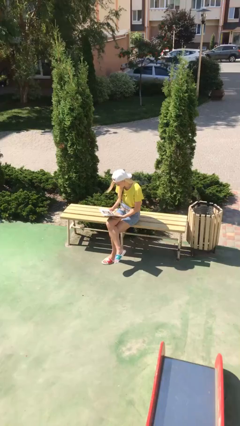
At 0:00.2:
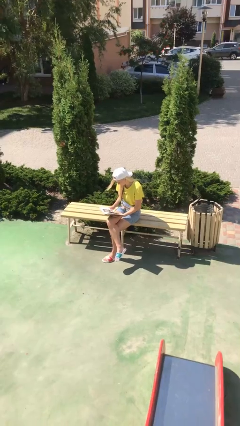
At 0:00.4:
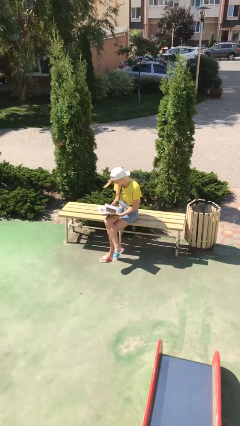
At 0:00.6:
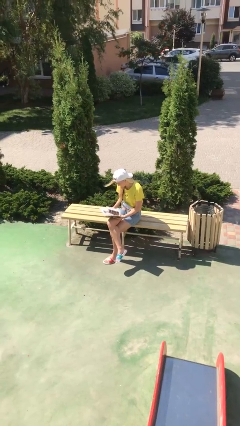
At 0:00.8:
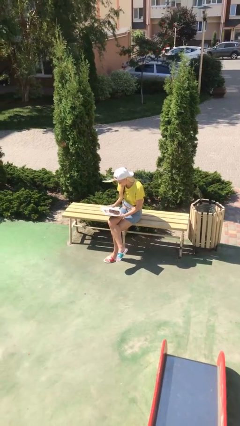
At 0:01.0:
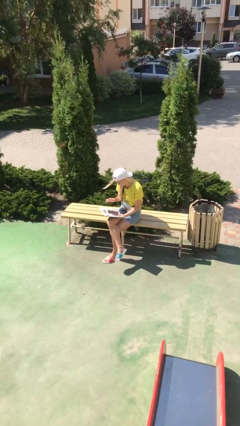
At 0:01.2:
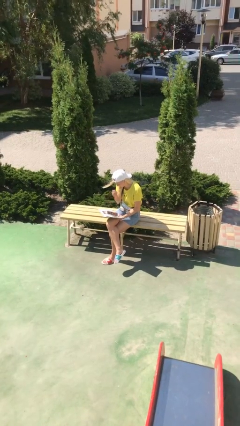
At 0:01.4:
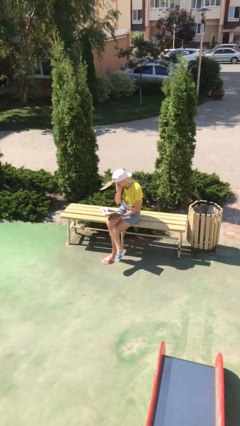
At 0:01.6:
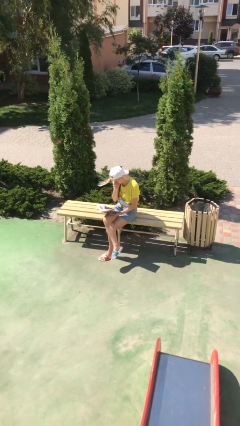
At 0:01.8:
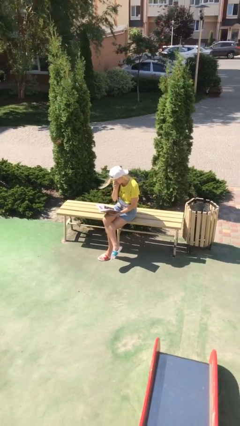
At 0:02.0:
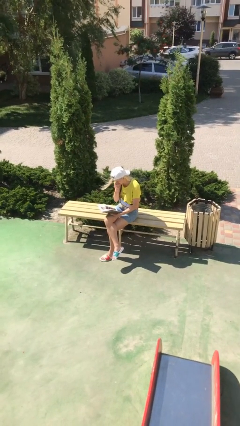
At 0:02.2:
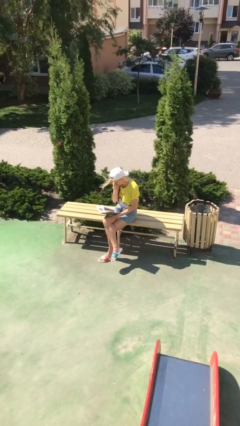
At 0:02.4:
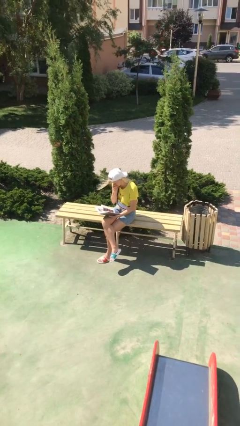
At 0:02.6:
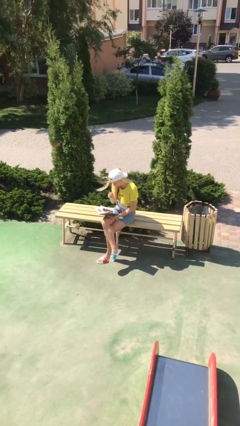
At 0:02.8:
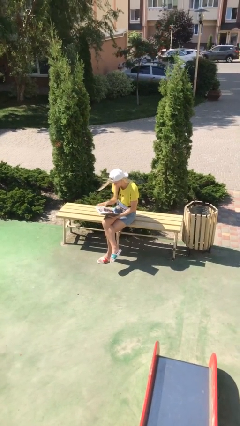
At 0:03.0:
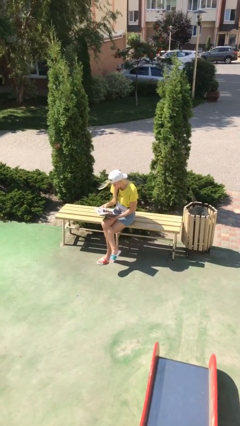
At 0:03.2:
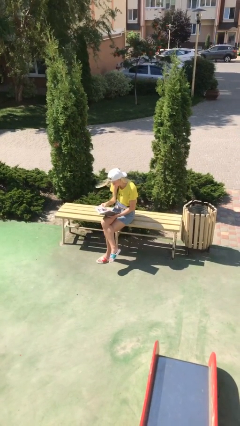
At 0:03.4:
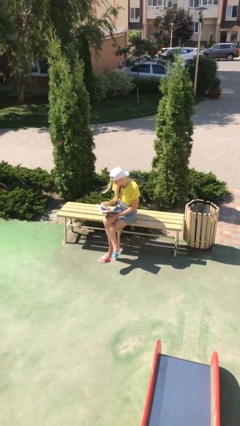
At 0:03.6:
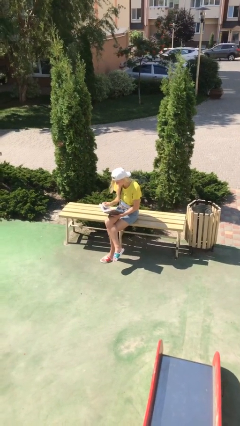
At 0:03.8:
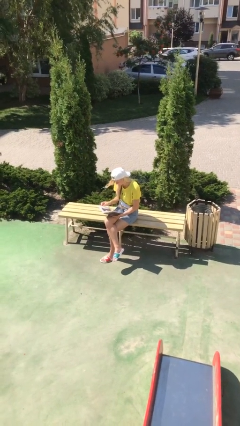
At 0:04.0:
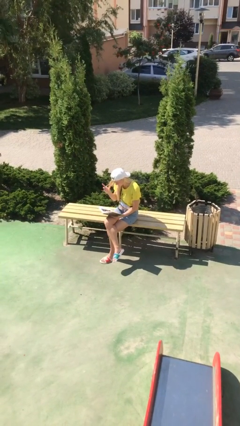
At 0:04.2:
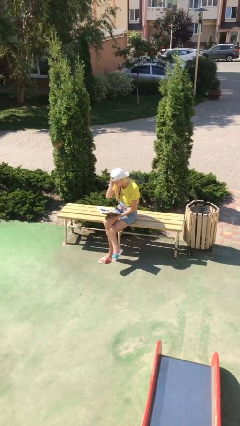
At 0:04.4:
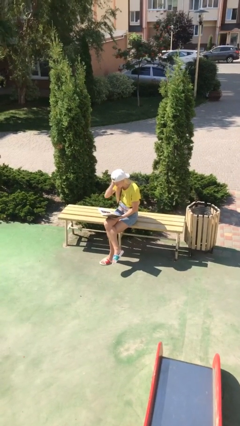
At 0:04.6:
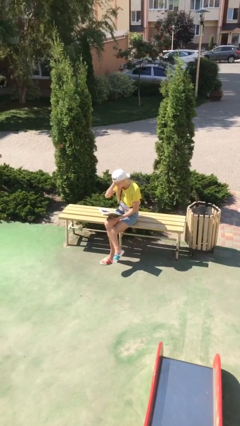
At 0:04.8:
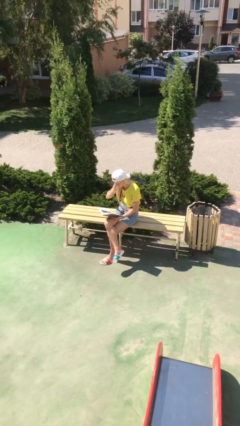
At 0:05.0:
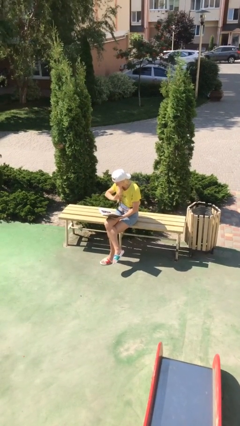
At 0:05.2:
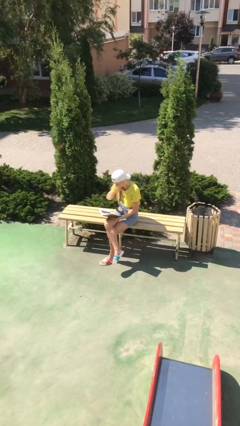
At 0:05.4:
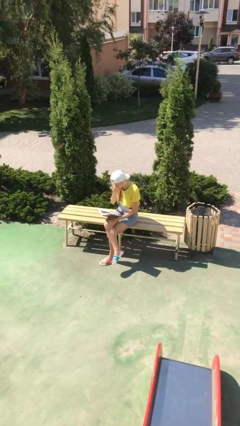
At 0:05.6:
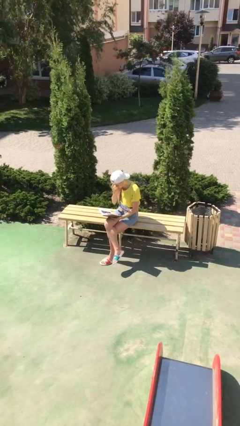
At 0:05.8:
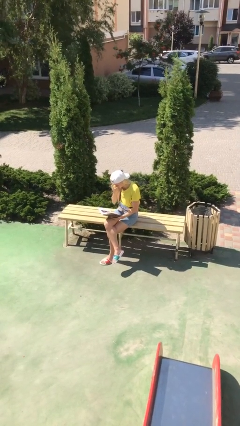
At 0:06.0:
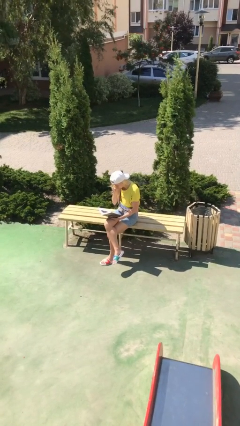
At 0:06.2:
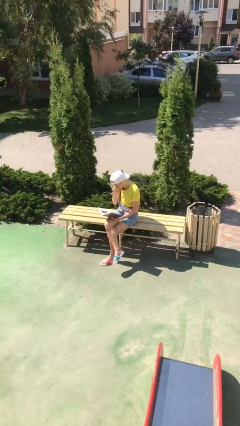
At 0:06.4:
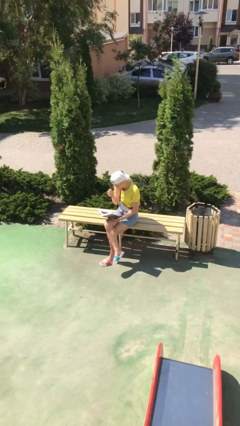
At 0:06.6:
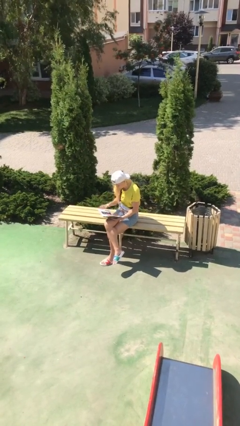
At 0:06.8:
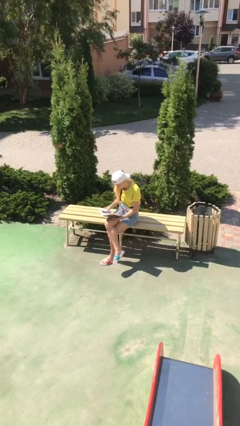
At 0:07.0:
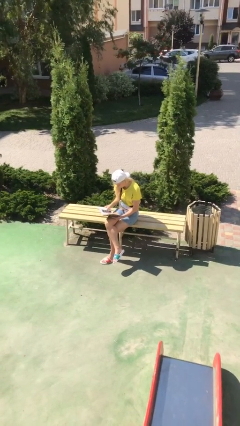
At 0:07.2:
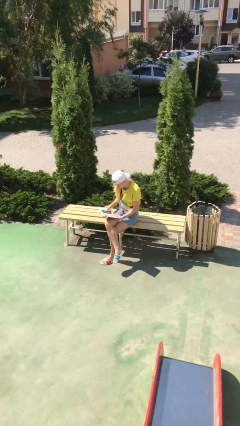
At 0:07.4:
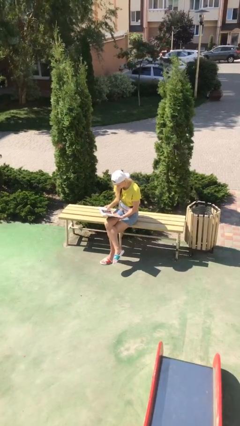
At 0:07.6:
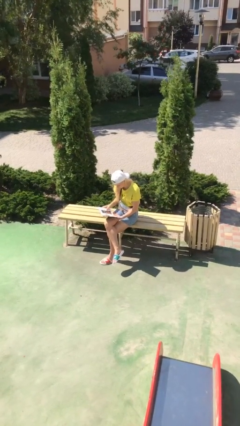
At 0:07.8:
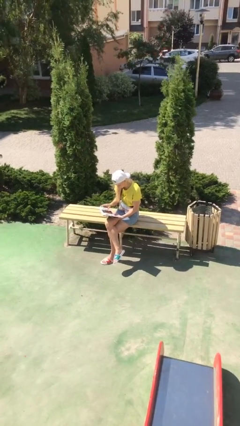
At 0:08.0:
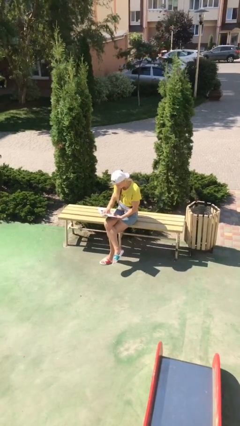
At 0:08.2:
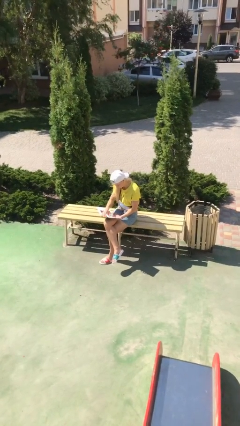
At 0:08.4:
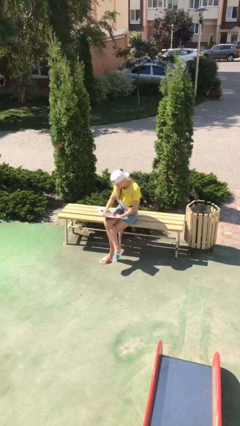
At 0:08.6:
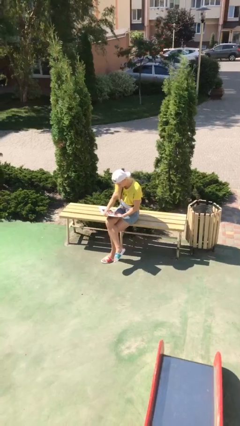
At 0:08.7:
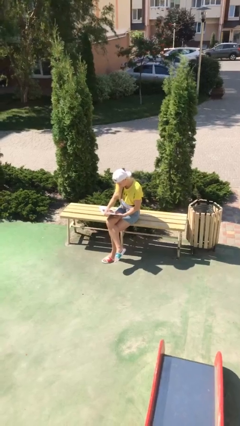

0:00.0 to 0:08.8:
person reads document

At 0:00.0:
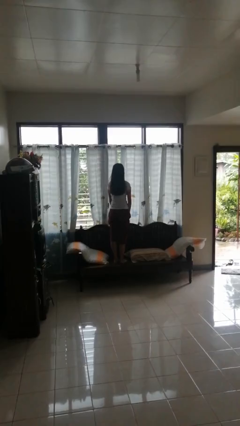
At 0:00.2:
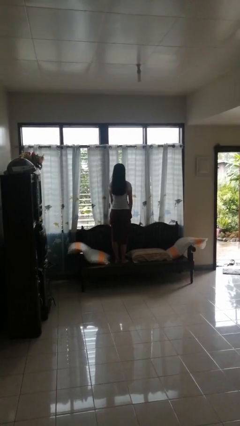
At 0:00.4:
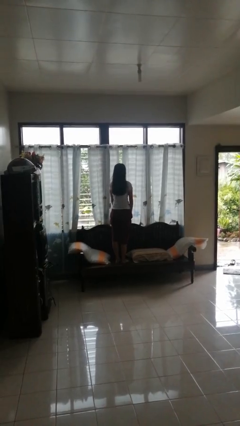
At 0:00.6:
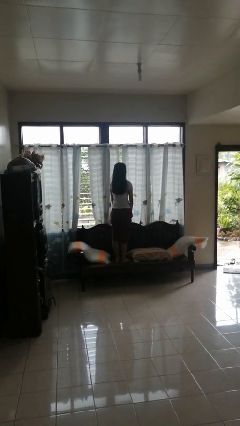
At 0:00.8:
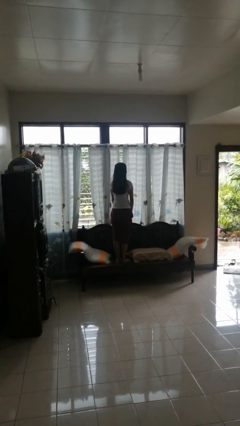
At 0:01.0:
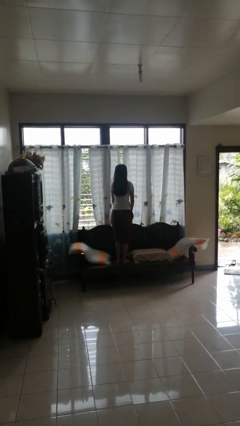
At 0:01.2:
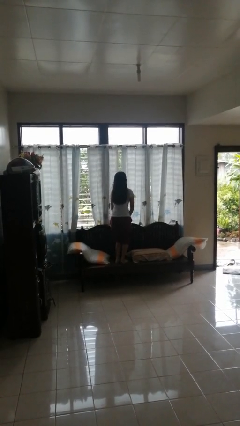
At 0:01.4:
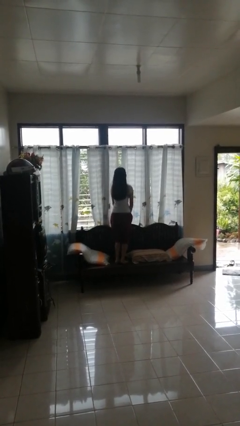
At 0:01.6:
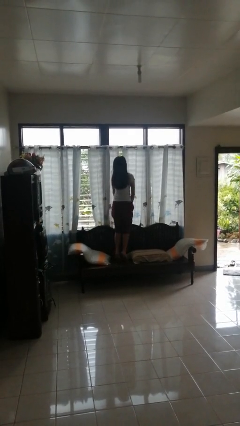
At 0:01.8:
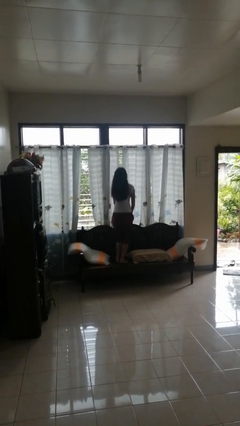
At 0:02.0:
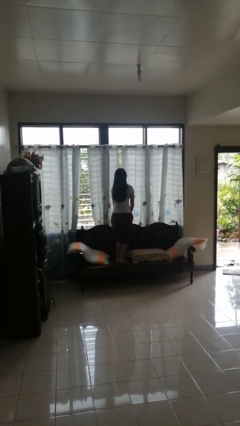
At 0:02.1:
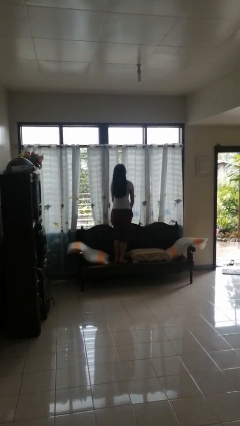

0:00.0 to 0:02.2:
person jumps on couch

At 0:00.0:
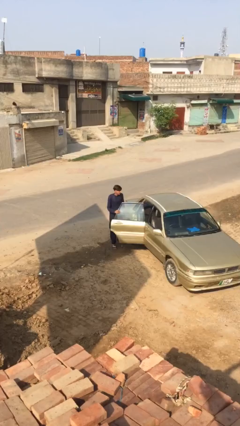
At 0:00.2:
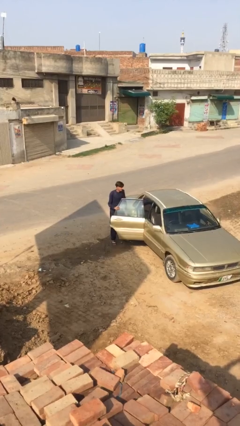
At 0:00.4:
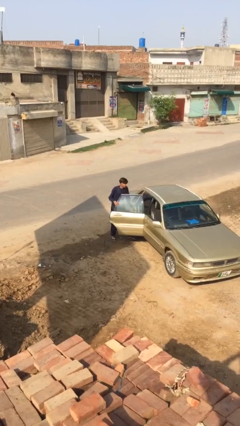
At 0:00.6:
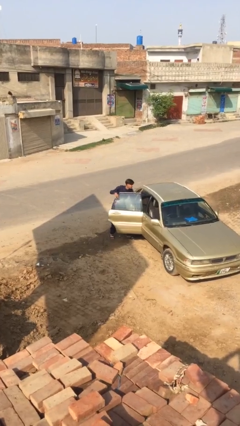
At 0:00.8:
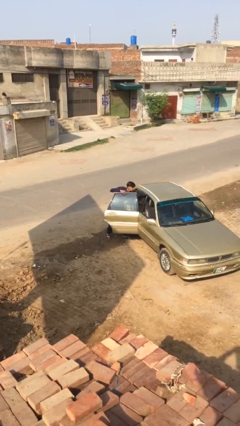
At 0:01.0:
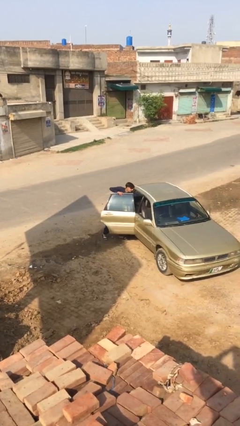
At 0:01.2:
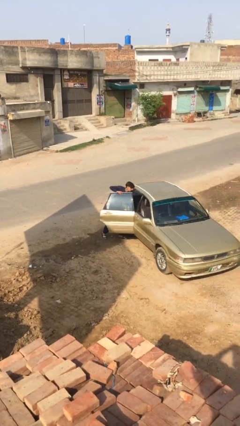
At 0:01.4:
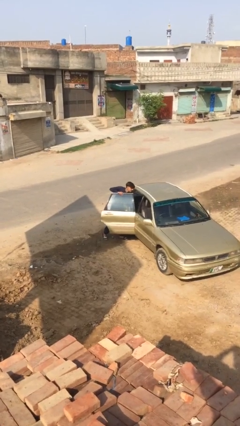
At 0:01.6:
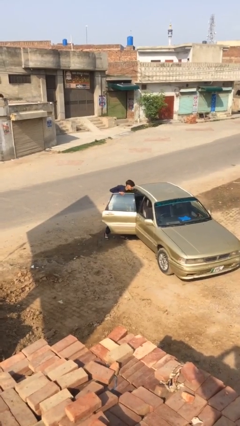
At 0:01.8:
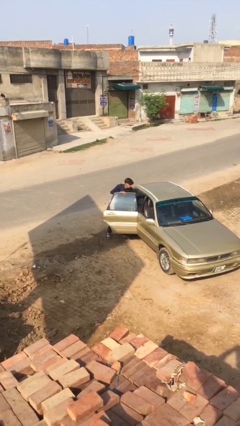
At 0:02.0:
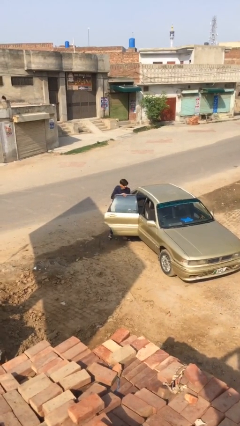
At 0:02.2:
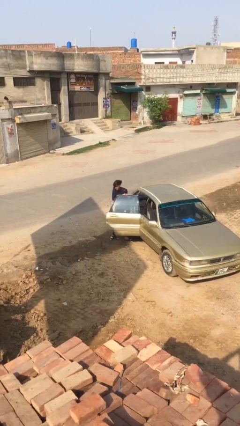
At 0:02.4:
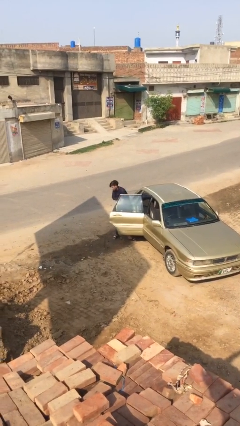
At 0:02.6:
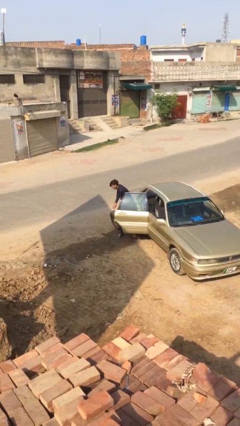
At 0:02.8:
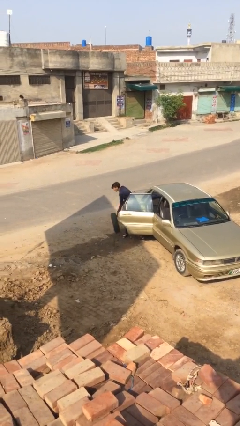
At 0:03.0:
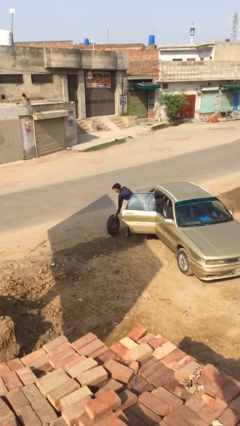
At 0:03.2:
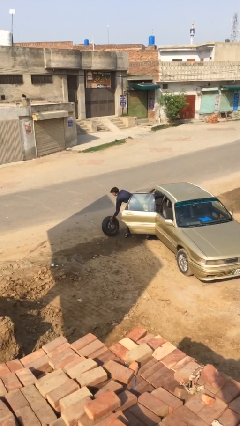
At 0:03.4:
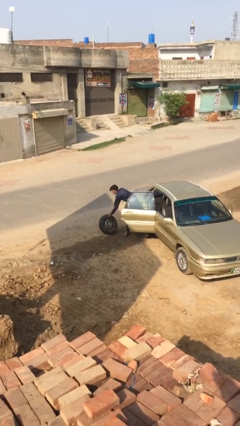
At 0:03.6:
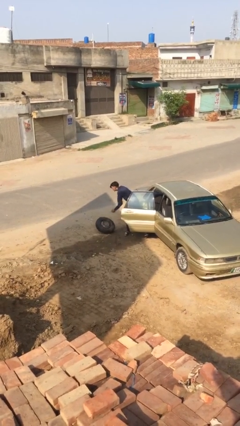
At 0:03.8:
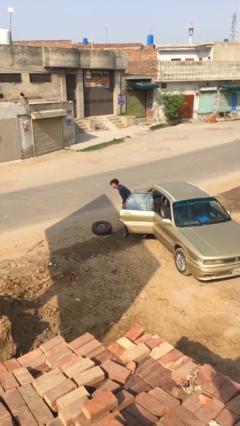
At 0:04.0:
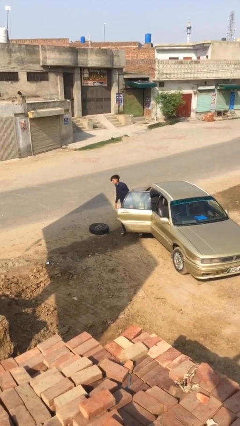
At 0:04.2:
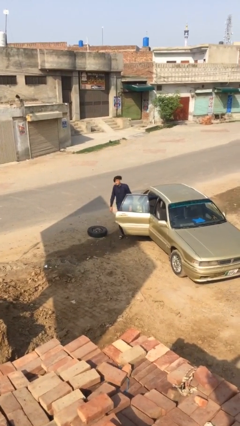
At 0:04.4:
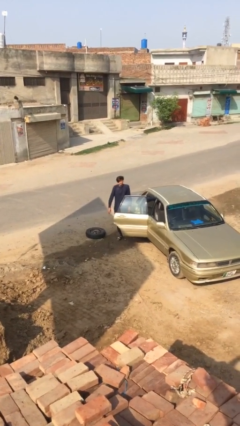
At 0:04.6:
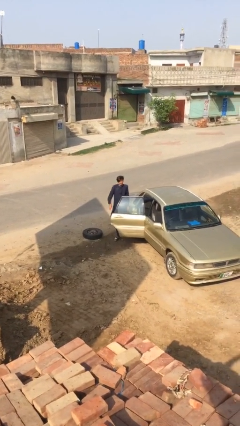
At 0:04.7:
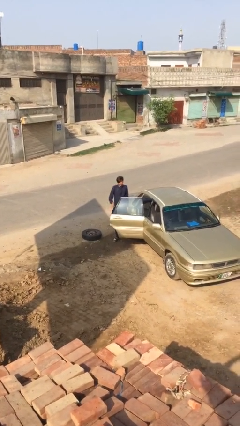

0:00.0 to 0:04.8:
person unloads car

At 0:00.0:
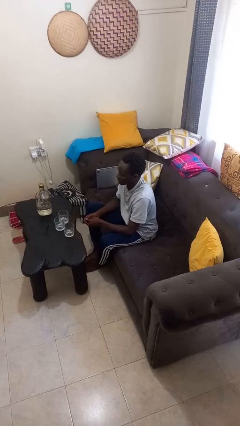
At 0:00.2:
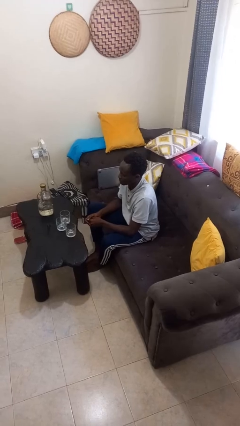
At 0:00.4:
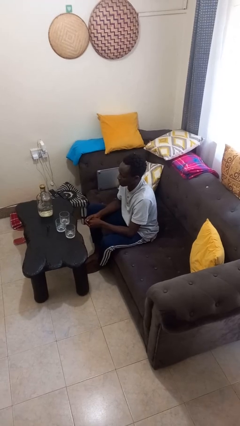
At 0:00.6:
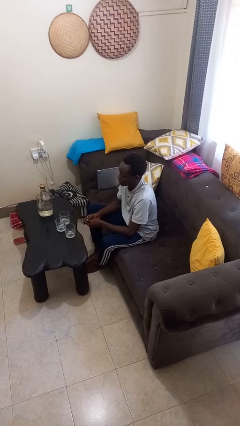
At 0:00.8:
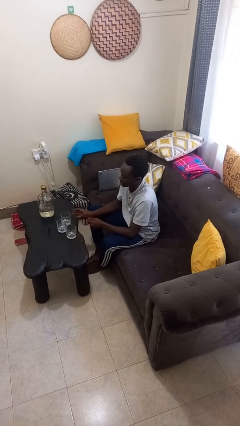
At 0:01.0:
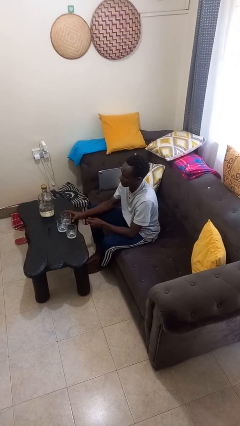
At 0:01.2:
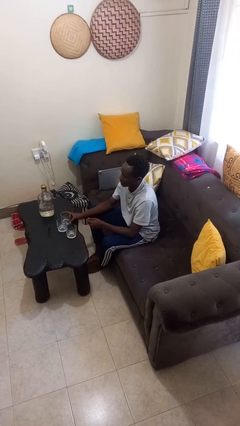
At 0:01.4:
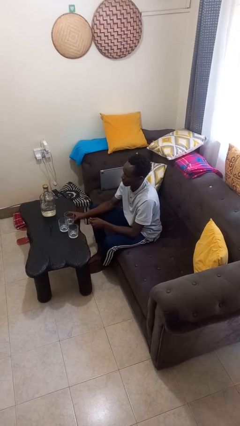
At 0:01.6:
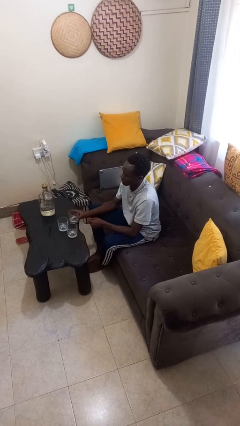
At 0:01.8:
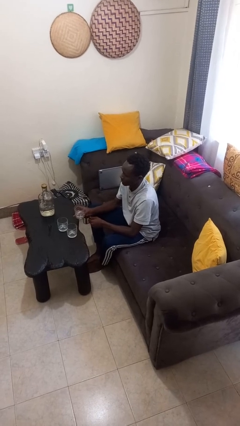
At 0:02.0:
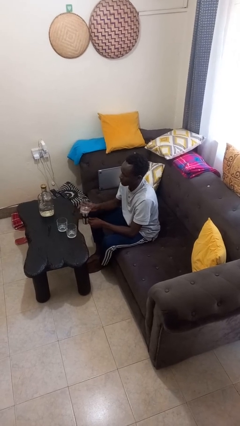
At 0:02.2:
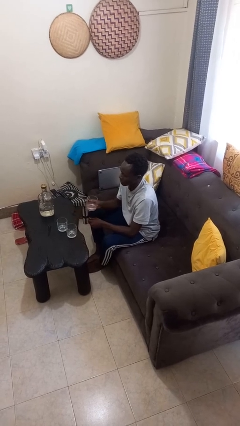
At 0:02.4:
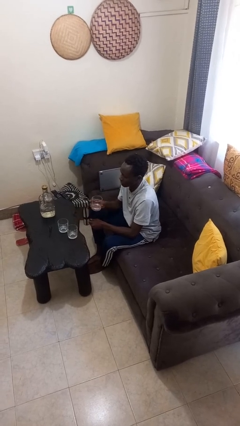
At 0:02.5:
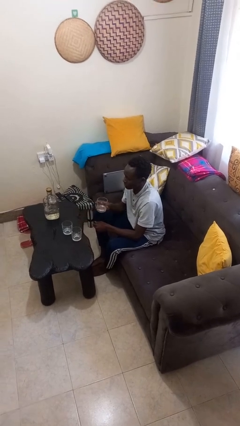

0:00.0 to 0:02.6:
person picks up object from table
